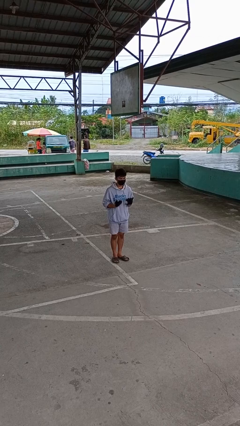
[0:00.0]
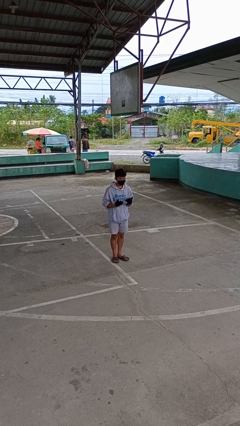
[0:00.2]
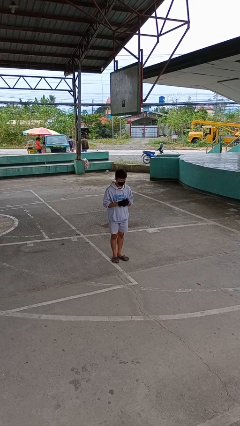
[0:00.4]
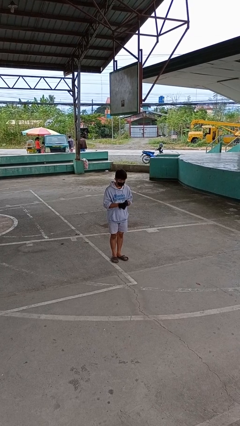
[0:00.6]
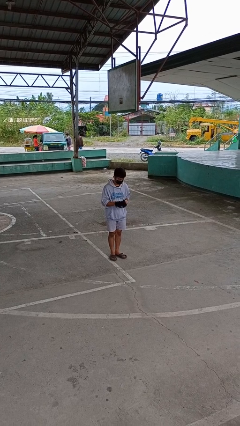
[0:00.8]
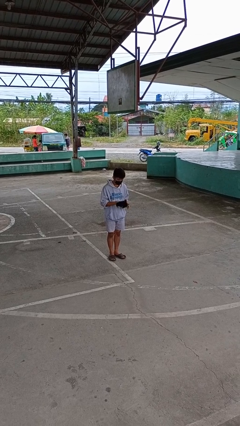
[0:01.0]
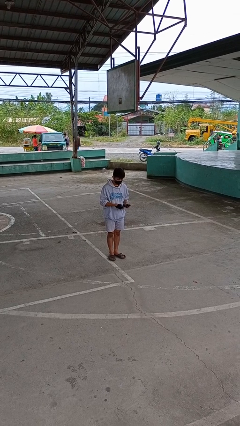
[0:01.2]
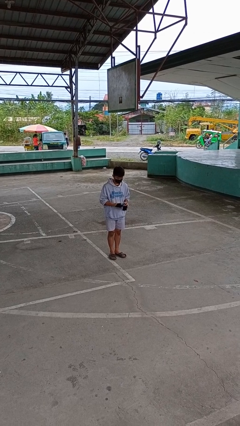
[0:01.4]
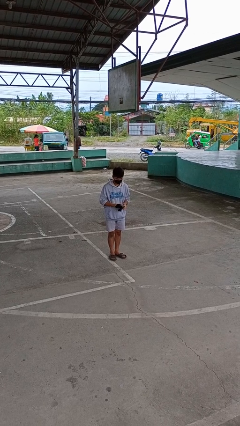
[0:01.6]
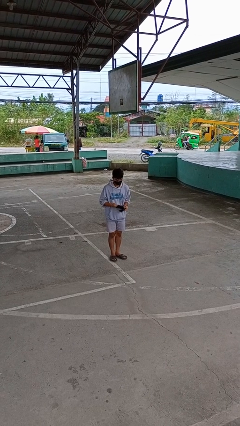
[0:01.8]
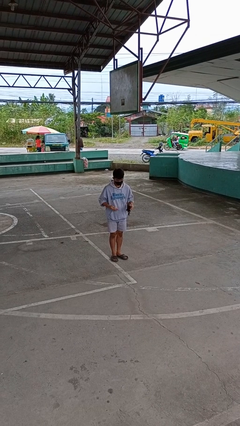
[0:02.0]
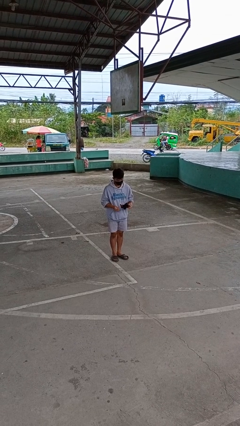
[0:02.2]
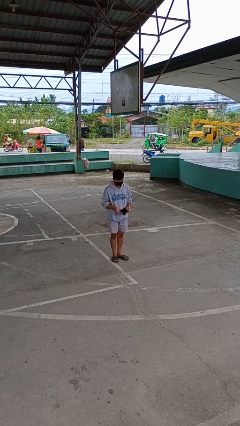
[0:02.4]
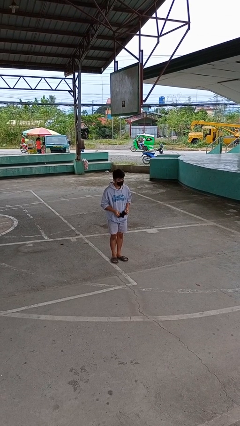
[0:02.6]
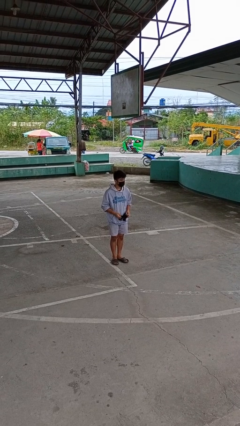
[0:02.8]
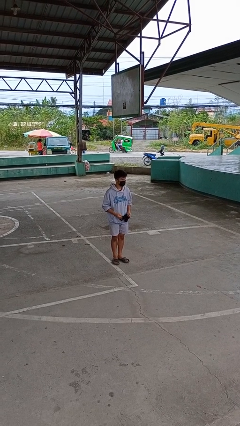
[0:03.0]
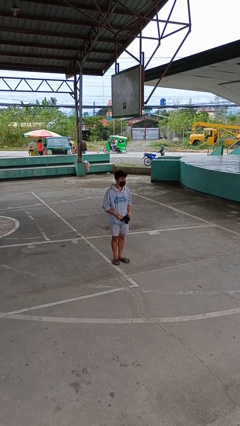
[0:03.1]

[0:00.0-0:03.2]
person takes off gloves

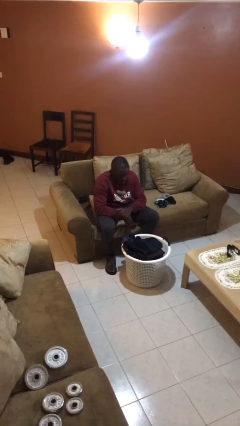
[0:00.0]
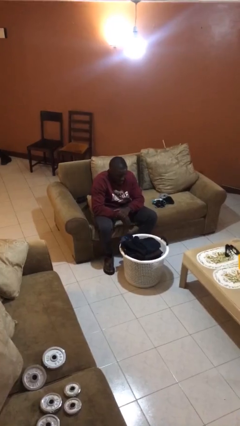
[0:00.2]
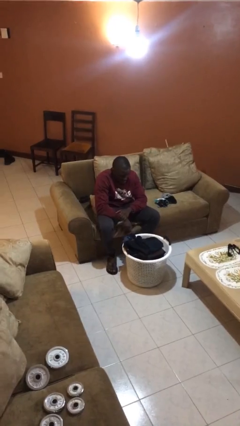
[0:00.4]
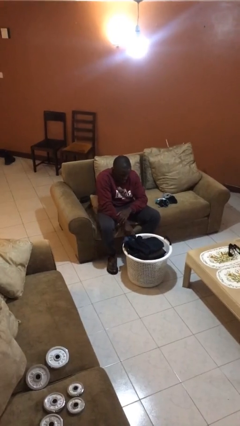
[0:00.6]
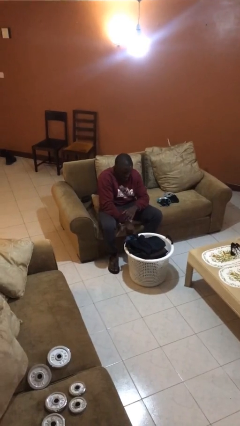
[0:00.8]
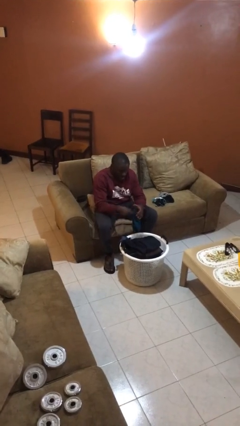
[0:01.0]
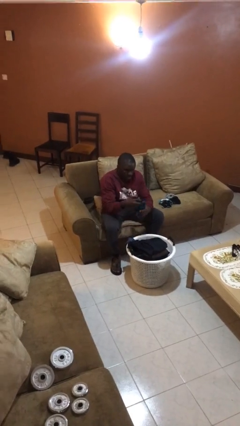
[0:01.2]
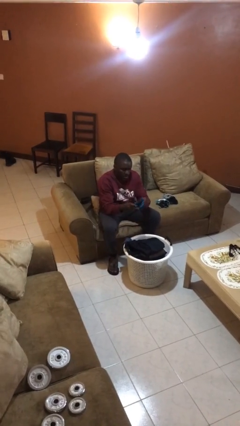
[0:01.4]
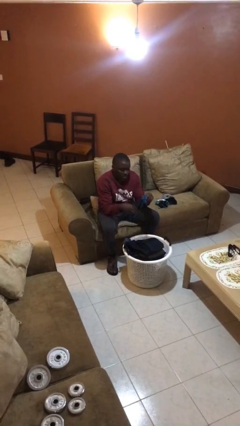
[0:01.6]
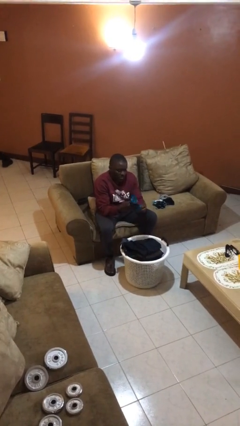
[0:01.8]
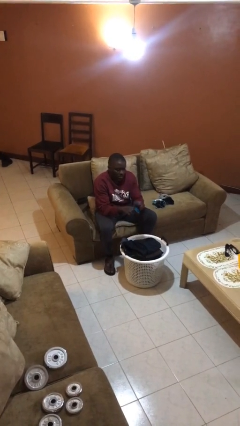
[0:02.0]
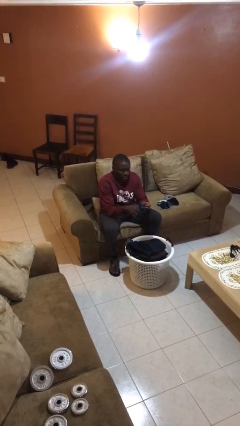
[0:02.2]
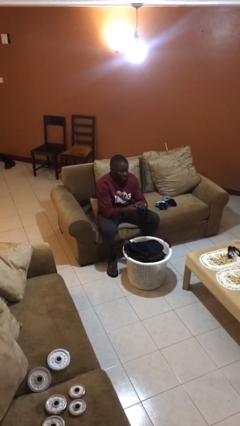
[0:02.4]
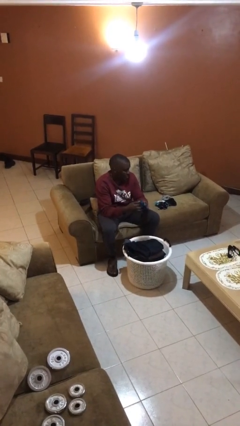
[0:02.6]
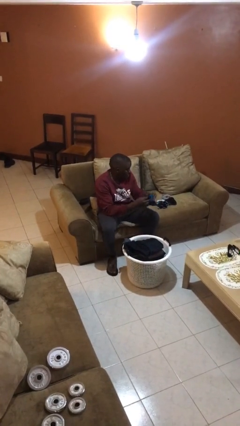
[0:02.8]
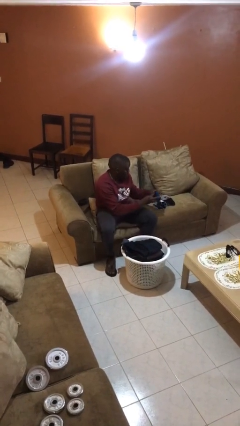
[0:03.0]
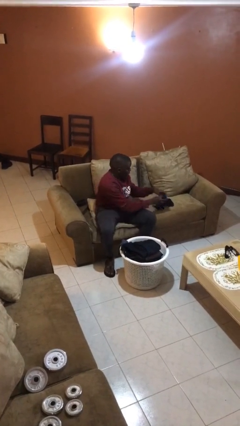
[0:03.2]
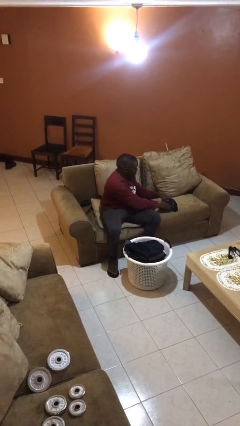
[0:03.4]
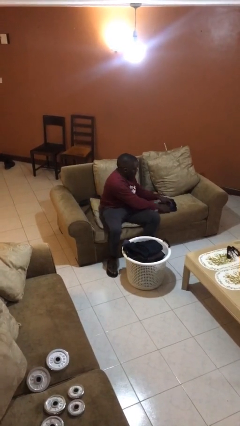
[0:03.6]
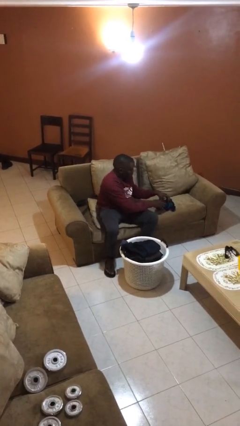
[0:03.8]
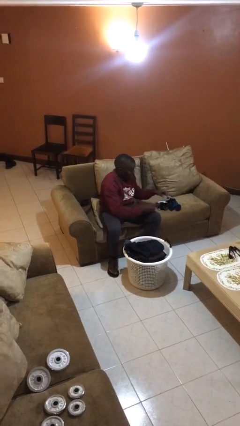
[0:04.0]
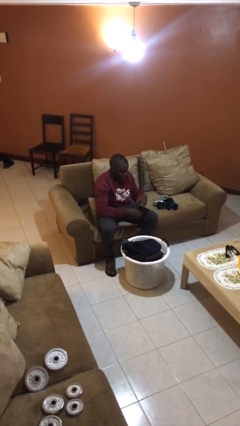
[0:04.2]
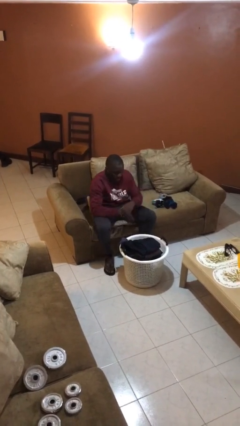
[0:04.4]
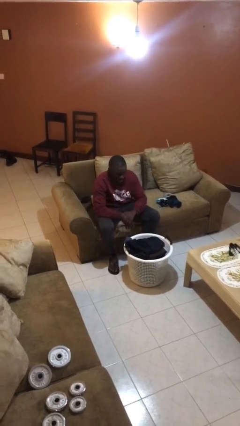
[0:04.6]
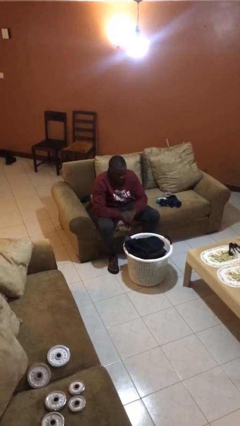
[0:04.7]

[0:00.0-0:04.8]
person folds socks

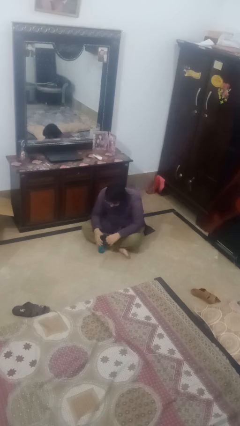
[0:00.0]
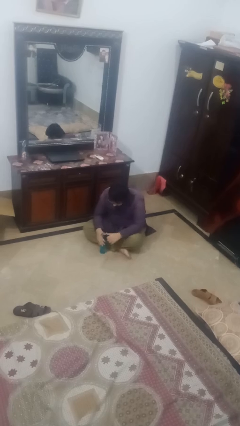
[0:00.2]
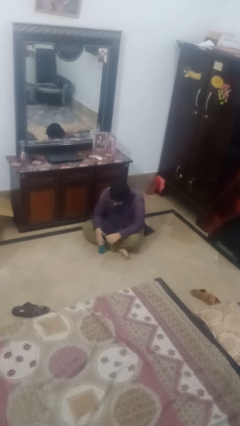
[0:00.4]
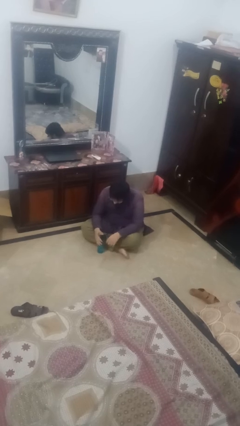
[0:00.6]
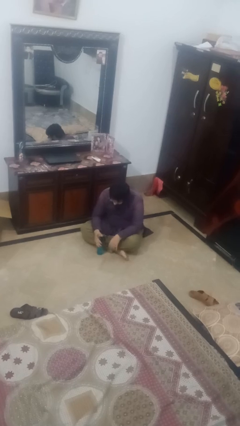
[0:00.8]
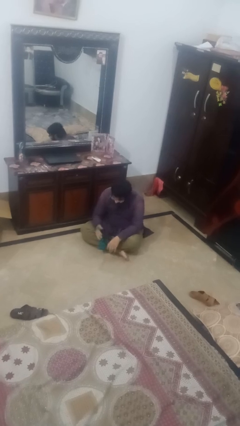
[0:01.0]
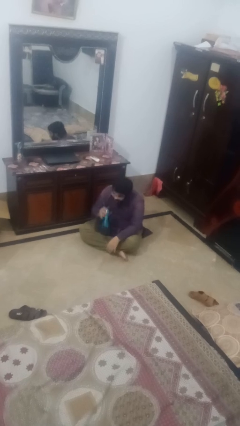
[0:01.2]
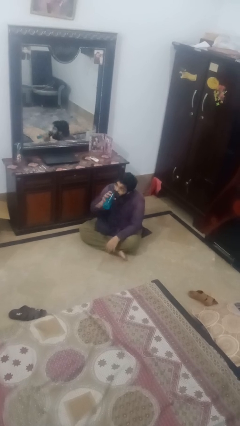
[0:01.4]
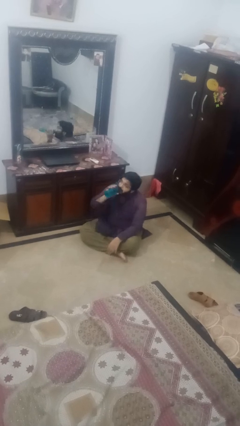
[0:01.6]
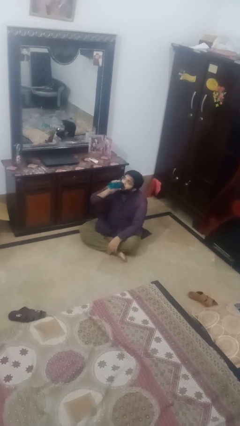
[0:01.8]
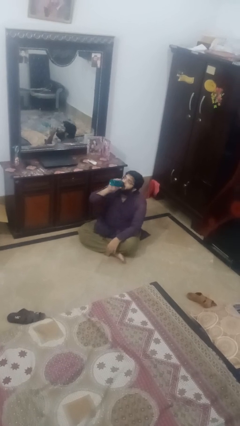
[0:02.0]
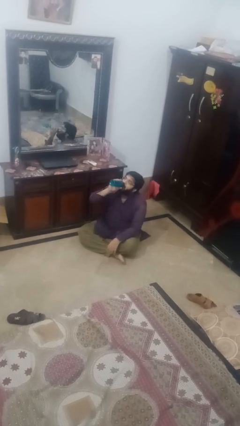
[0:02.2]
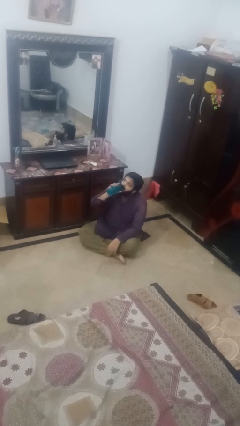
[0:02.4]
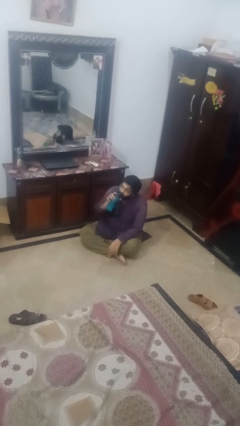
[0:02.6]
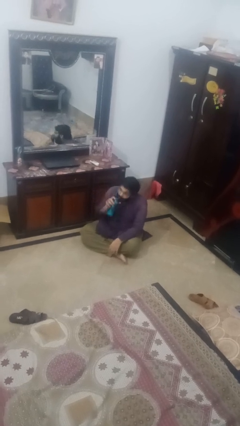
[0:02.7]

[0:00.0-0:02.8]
person drinks from bottle

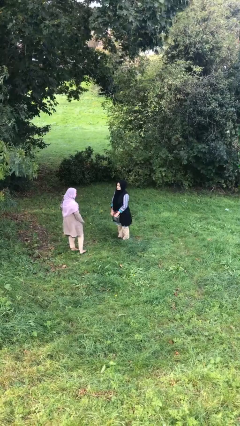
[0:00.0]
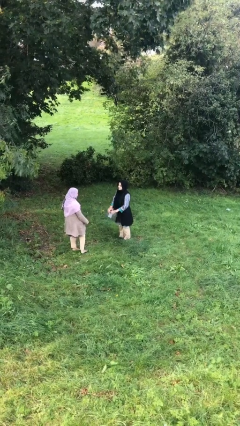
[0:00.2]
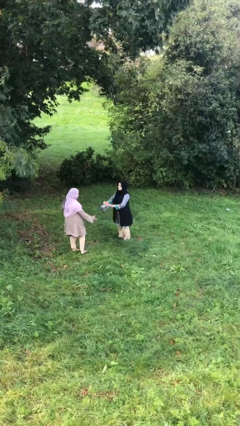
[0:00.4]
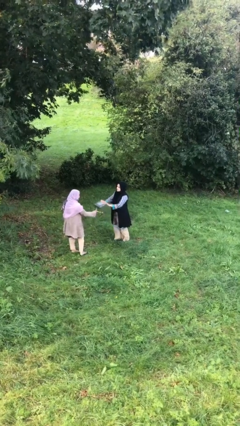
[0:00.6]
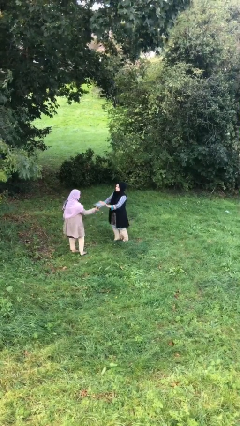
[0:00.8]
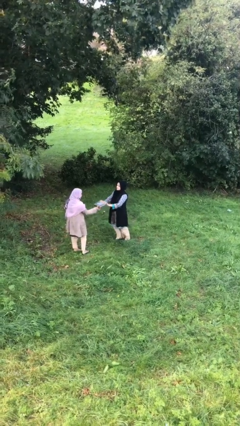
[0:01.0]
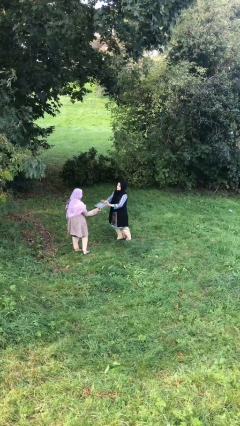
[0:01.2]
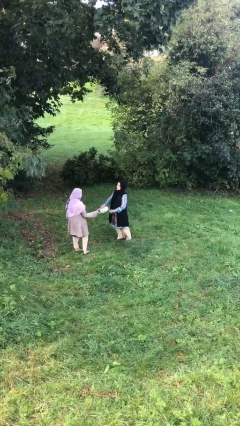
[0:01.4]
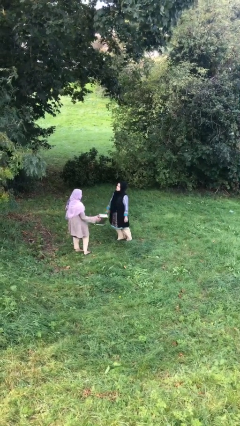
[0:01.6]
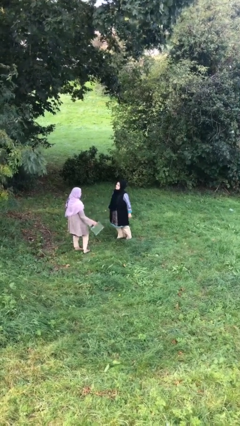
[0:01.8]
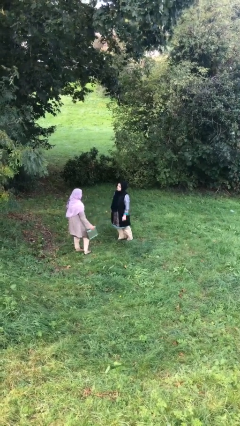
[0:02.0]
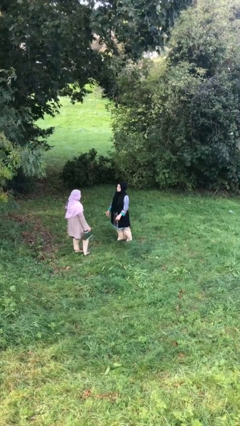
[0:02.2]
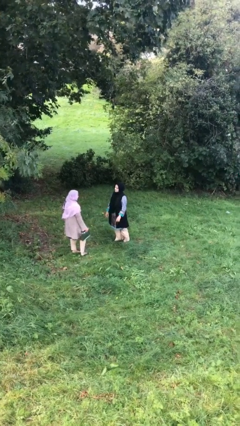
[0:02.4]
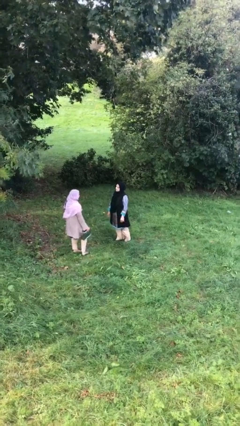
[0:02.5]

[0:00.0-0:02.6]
person transfers object to person

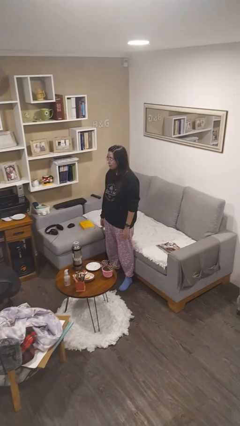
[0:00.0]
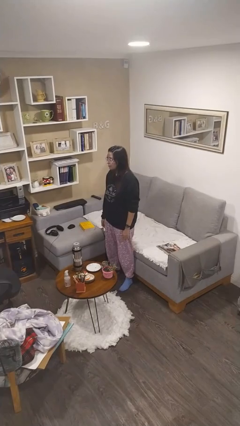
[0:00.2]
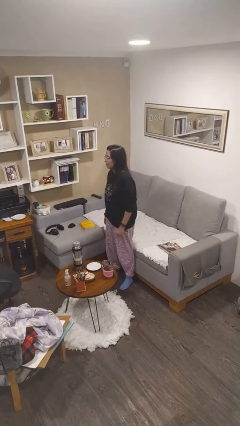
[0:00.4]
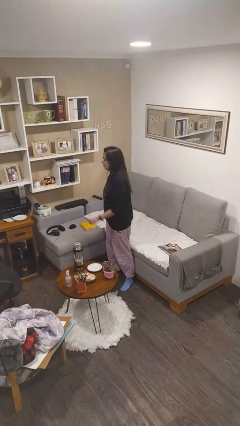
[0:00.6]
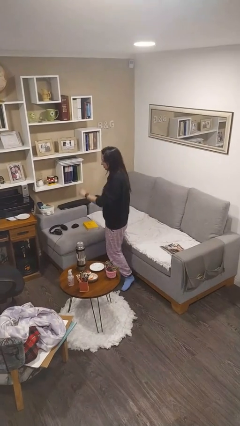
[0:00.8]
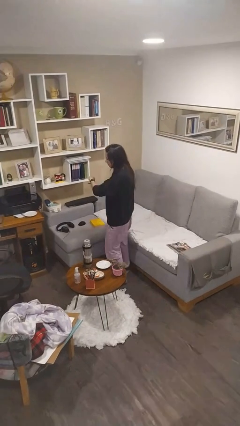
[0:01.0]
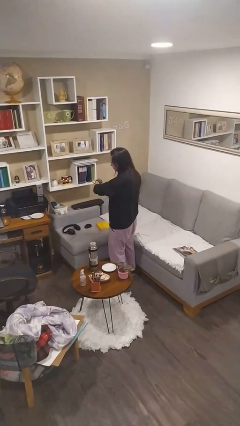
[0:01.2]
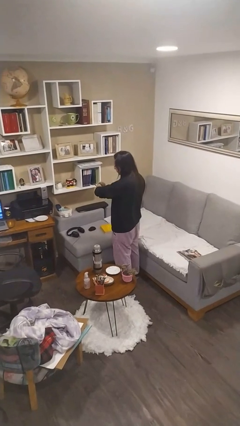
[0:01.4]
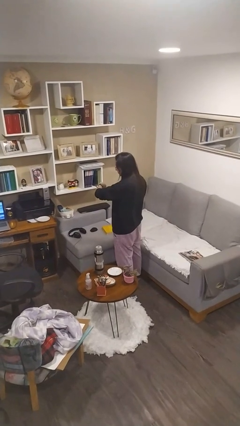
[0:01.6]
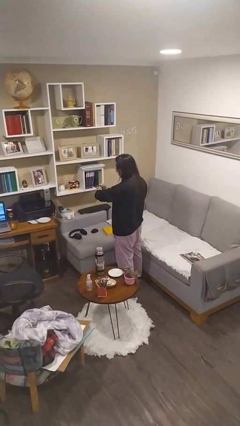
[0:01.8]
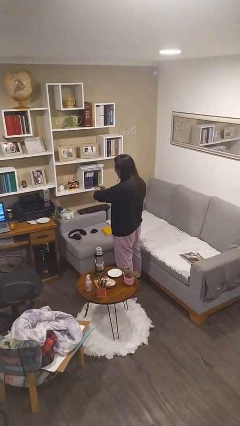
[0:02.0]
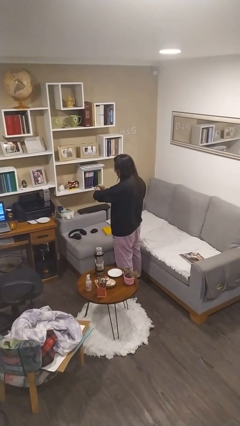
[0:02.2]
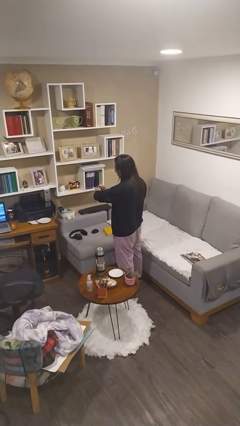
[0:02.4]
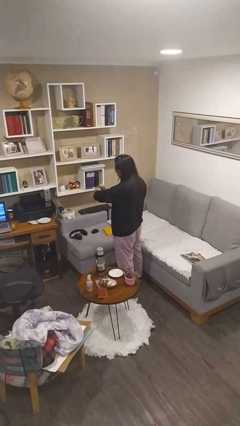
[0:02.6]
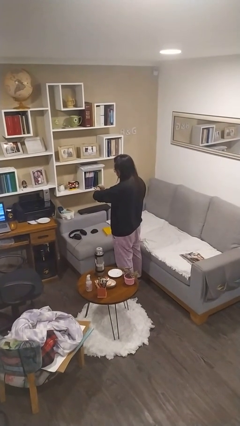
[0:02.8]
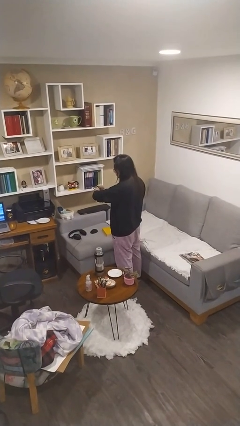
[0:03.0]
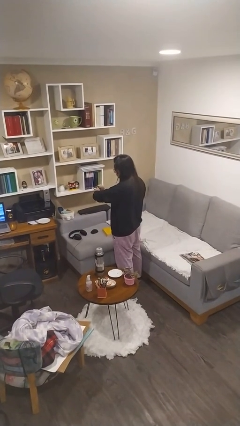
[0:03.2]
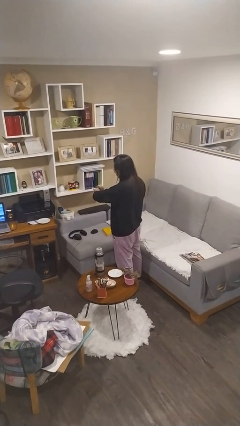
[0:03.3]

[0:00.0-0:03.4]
person looks at wristwatch

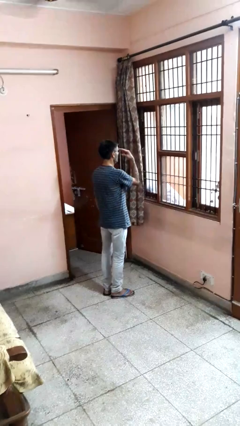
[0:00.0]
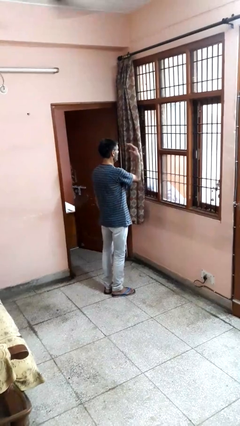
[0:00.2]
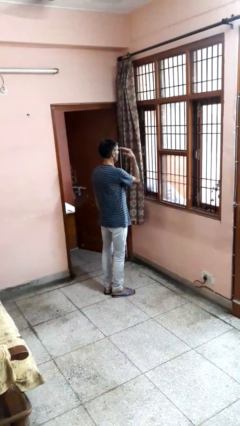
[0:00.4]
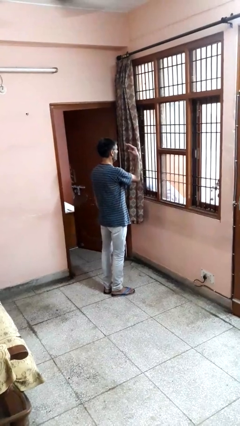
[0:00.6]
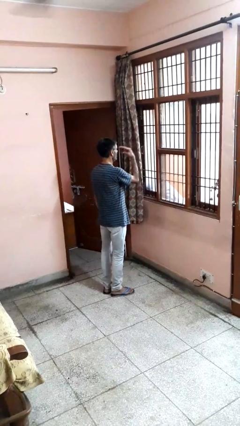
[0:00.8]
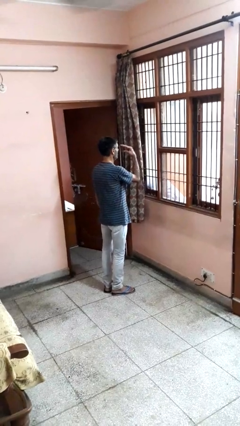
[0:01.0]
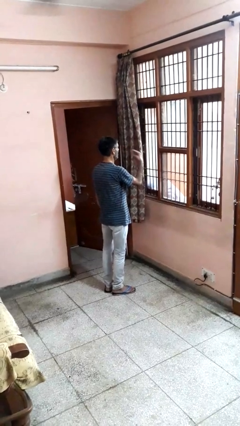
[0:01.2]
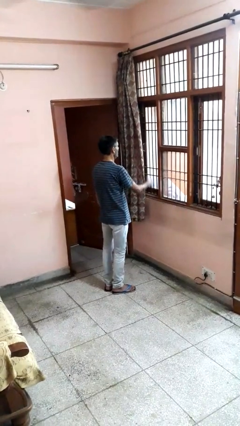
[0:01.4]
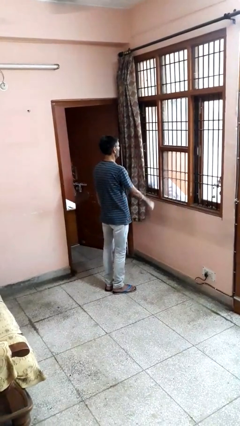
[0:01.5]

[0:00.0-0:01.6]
person gestures watch closely
